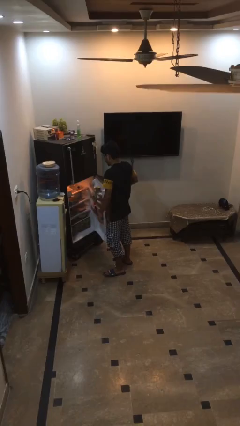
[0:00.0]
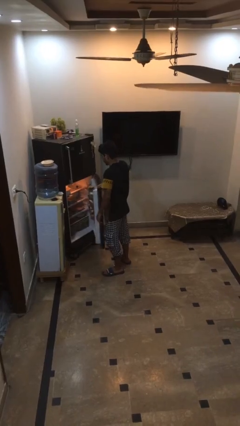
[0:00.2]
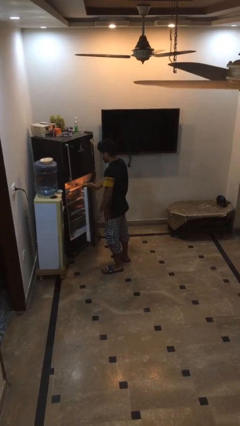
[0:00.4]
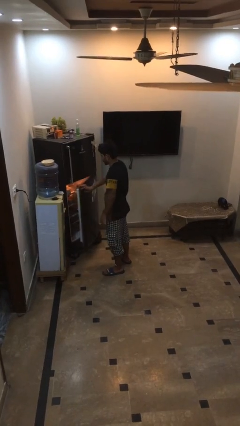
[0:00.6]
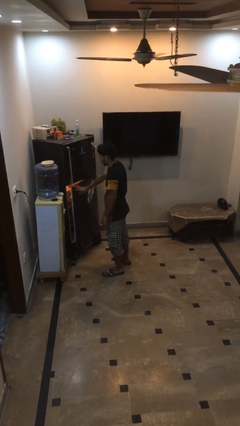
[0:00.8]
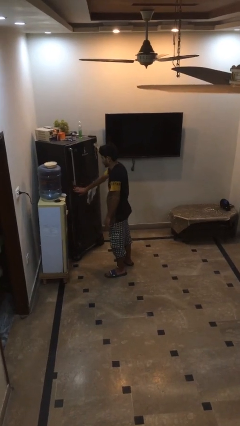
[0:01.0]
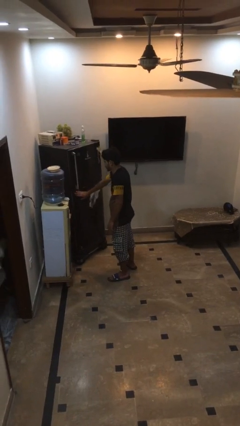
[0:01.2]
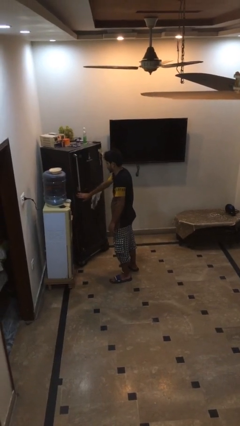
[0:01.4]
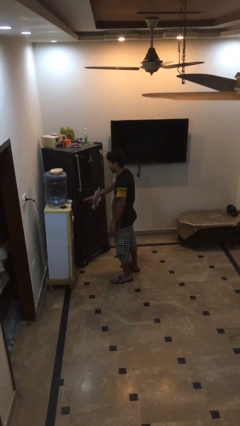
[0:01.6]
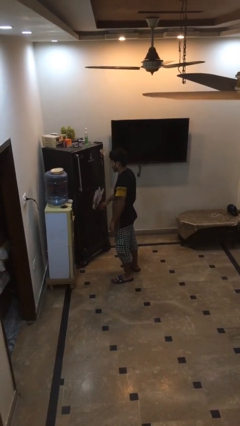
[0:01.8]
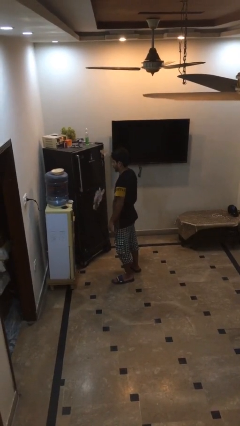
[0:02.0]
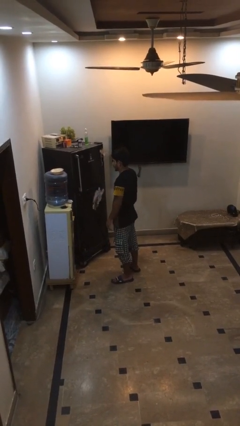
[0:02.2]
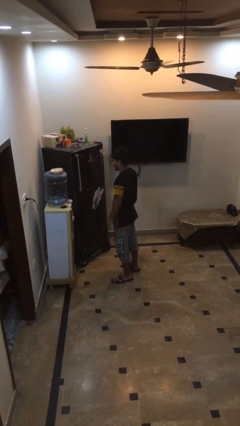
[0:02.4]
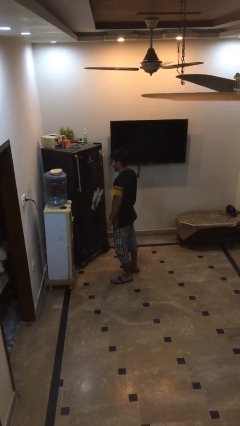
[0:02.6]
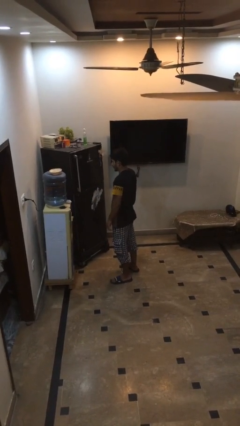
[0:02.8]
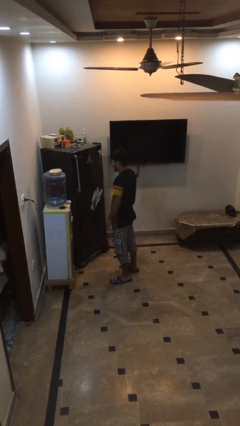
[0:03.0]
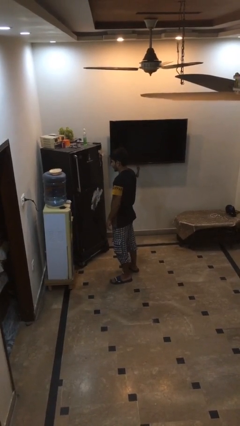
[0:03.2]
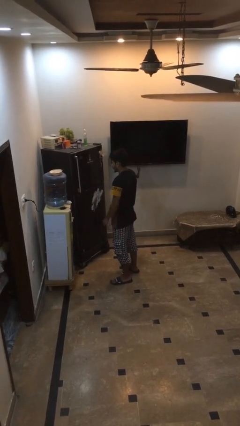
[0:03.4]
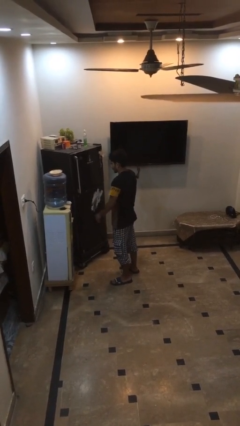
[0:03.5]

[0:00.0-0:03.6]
person closes refrigerator

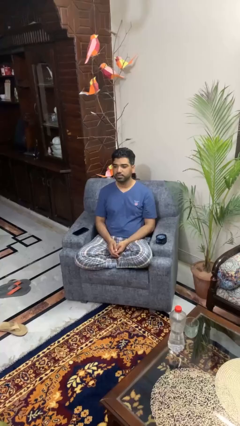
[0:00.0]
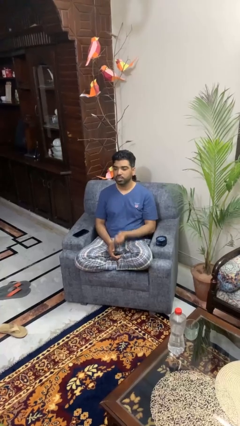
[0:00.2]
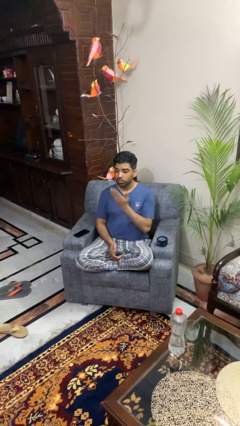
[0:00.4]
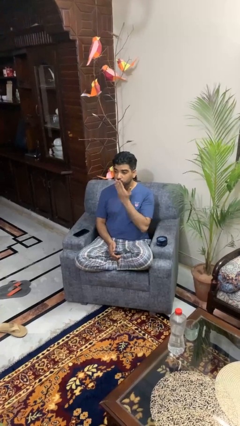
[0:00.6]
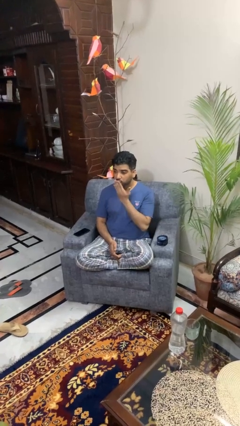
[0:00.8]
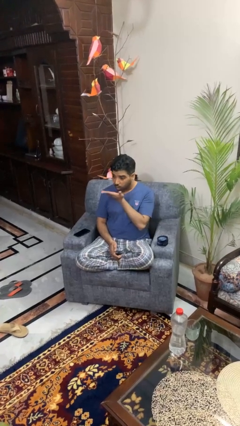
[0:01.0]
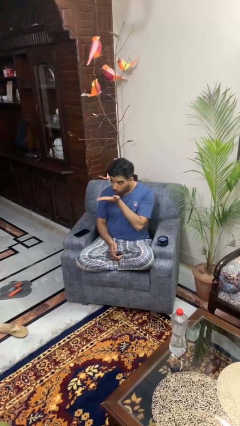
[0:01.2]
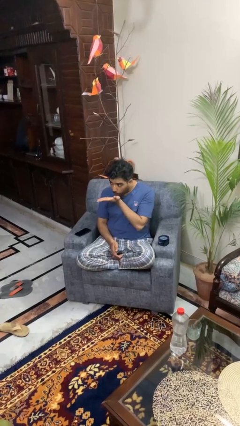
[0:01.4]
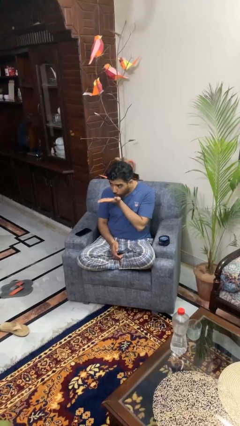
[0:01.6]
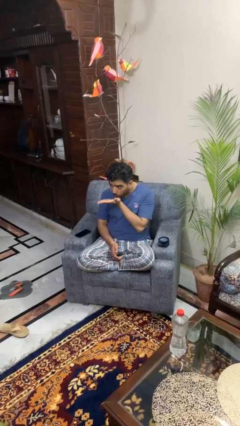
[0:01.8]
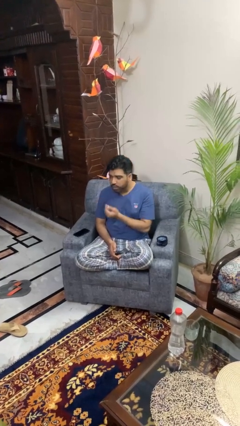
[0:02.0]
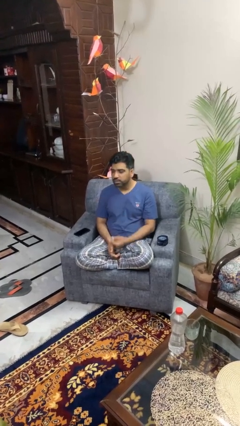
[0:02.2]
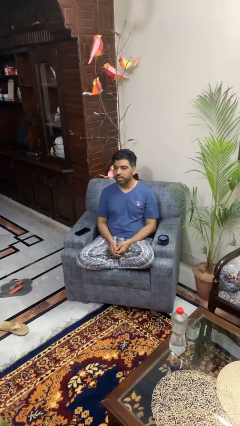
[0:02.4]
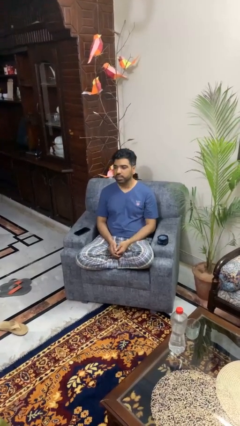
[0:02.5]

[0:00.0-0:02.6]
person gestures blow kiss

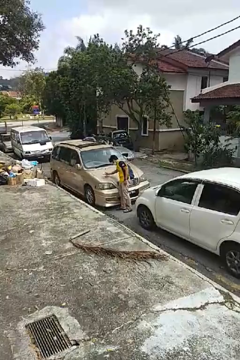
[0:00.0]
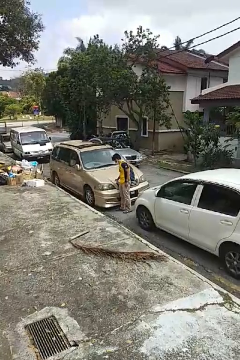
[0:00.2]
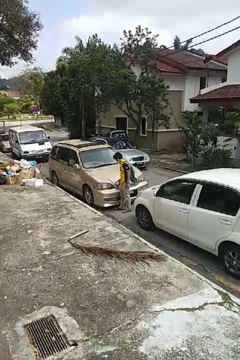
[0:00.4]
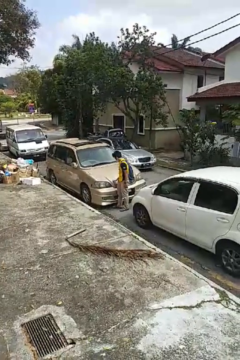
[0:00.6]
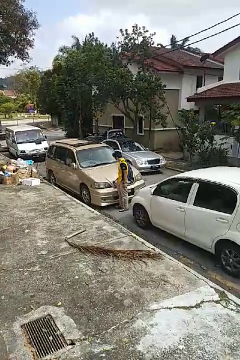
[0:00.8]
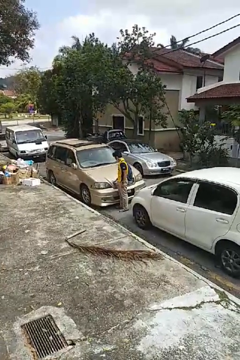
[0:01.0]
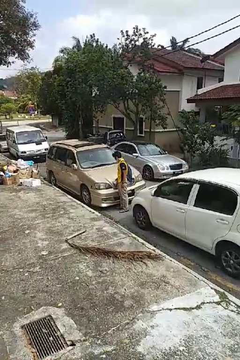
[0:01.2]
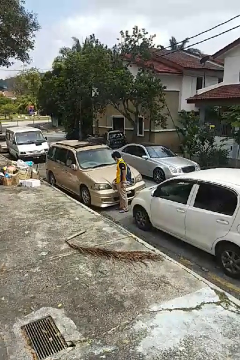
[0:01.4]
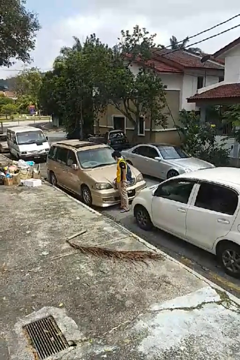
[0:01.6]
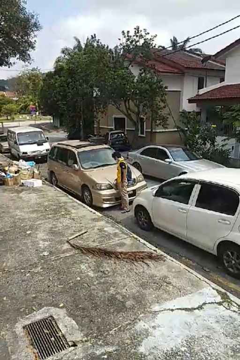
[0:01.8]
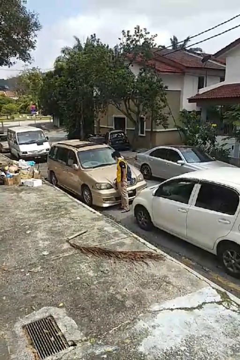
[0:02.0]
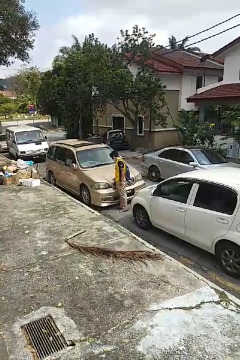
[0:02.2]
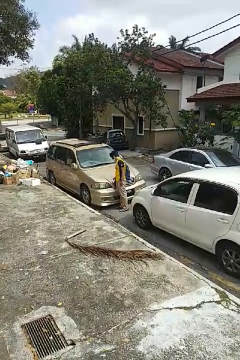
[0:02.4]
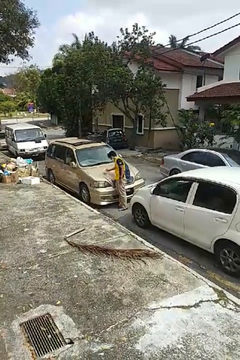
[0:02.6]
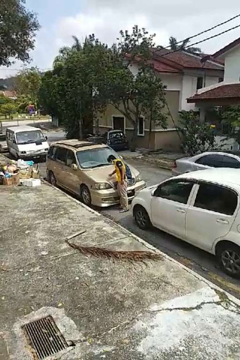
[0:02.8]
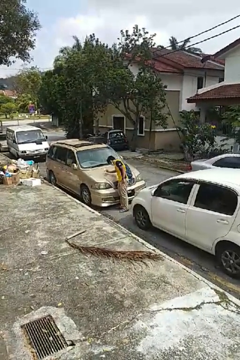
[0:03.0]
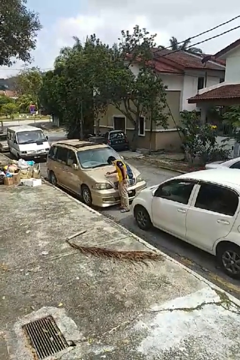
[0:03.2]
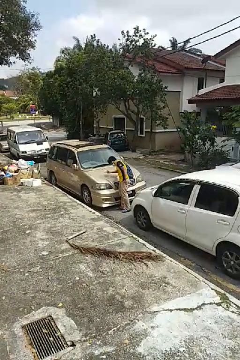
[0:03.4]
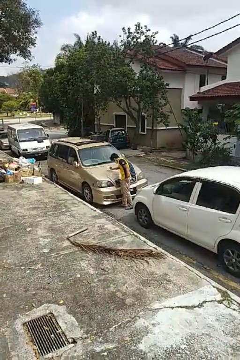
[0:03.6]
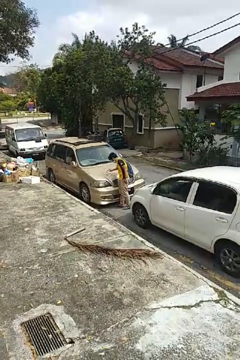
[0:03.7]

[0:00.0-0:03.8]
person polishes car with rag

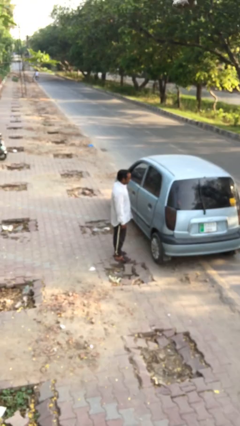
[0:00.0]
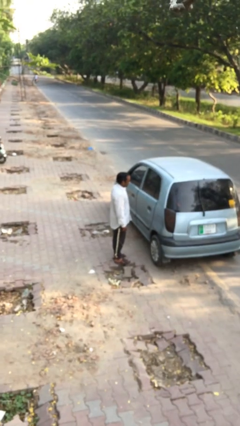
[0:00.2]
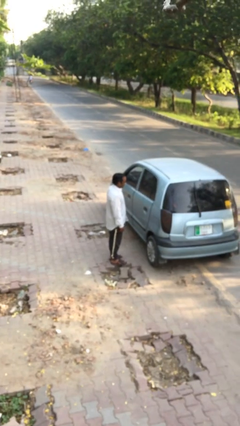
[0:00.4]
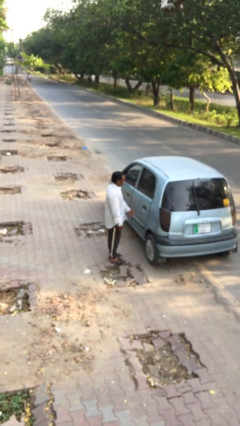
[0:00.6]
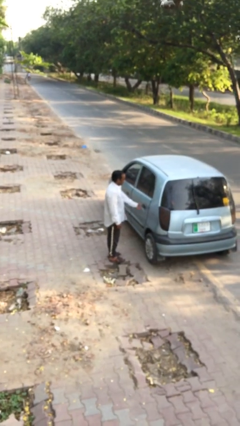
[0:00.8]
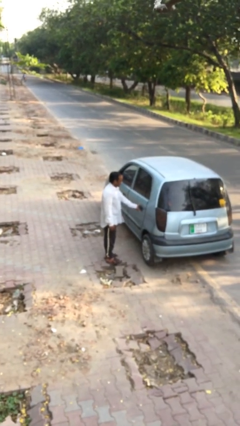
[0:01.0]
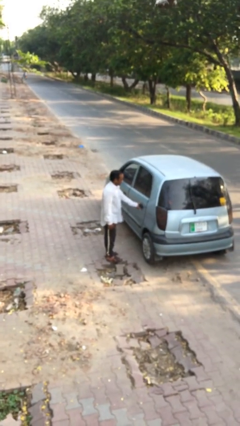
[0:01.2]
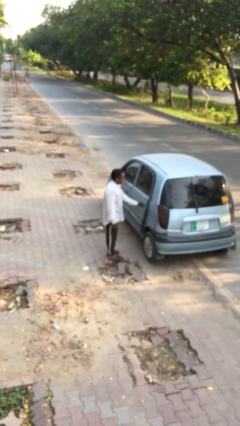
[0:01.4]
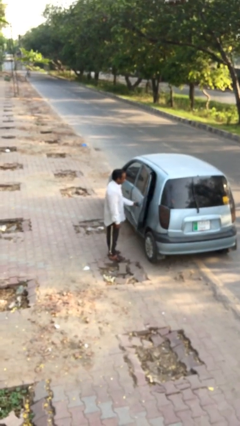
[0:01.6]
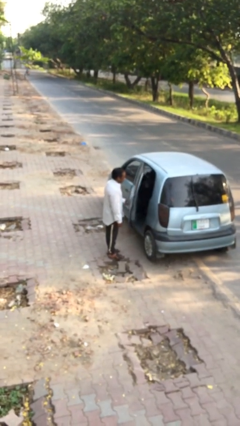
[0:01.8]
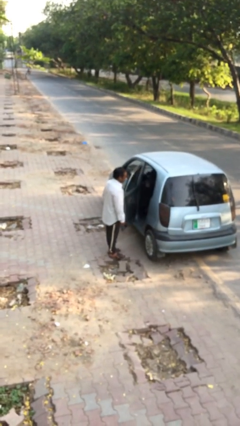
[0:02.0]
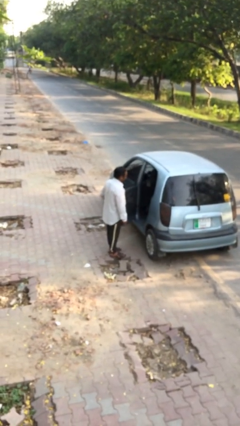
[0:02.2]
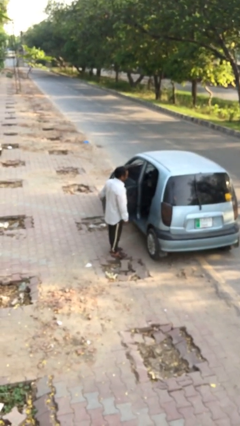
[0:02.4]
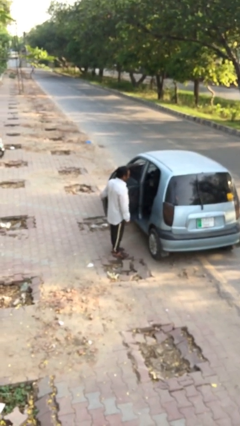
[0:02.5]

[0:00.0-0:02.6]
person opens car door

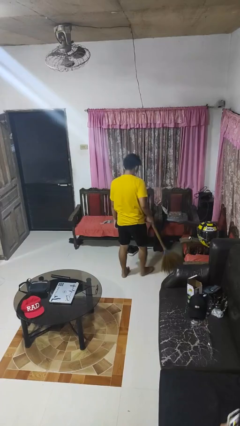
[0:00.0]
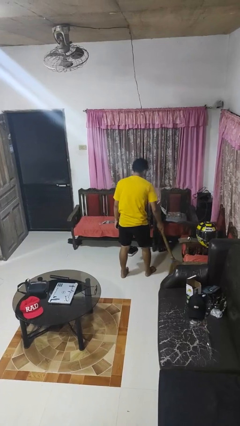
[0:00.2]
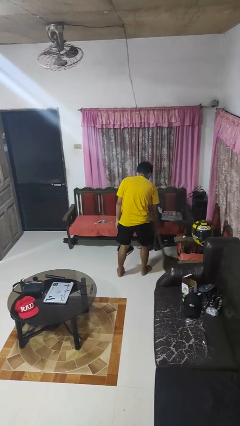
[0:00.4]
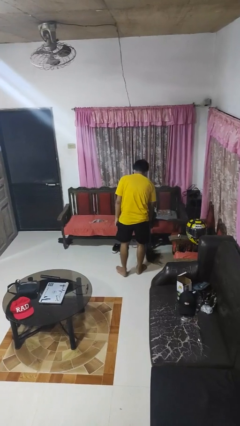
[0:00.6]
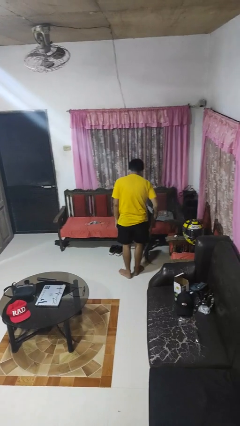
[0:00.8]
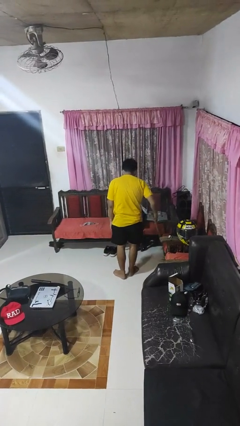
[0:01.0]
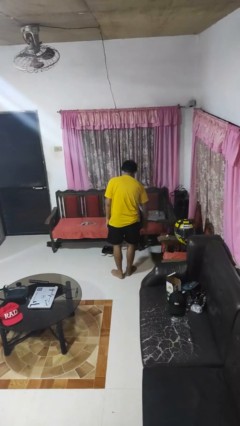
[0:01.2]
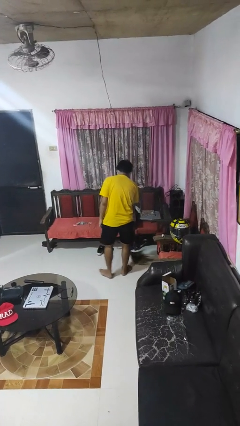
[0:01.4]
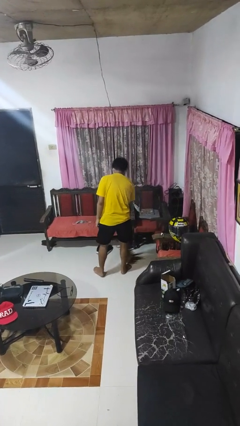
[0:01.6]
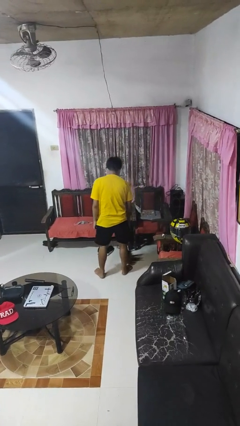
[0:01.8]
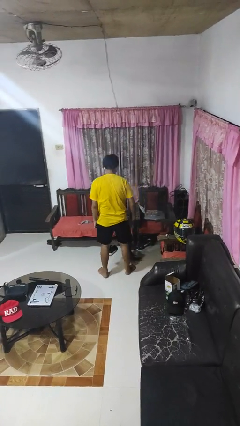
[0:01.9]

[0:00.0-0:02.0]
person sweeps floor

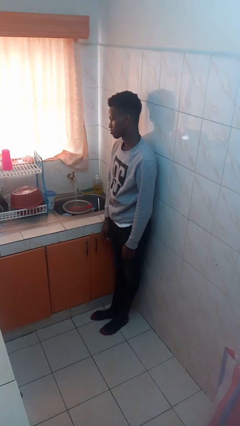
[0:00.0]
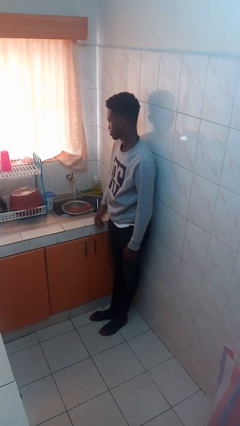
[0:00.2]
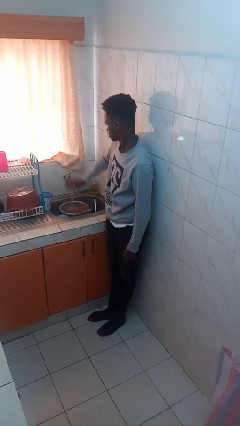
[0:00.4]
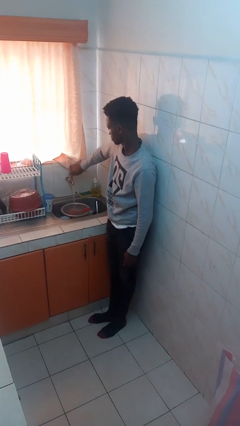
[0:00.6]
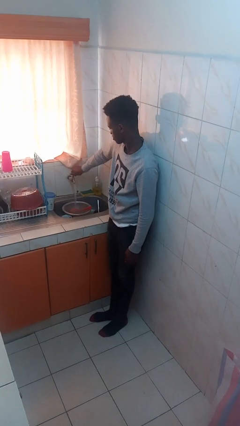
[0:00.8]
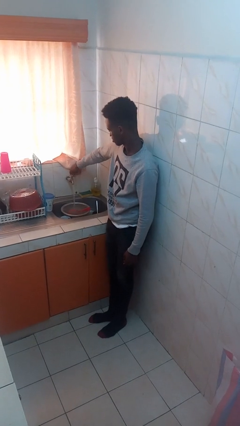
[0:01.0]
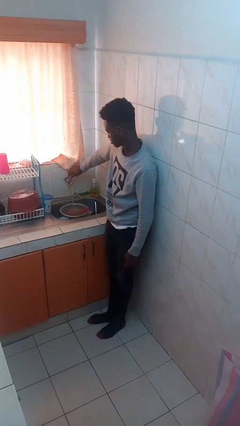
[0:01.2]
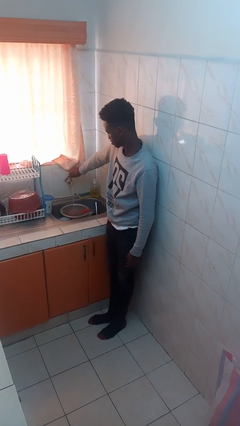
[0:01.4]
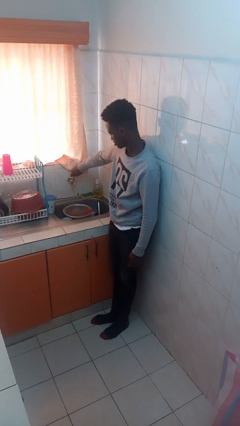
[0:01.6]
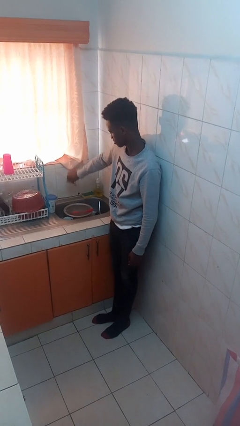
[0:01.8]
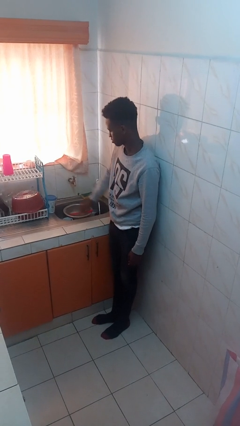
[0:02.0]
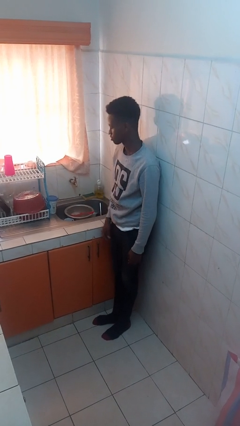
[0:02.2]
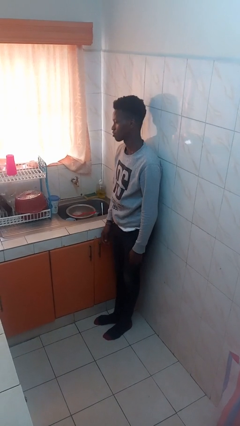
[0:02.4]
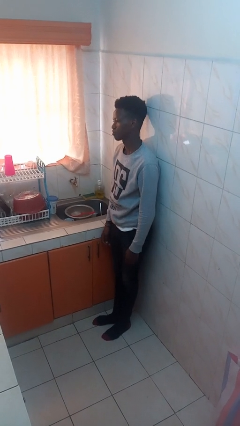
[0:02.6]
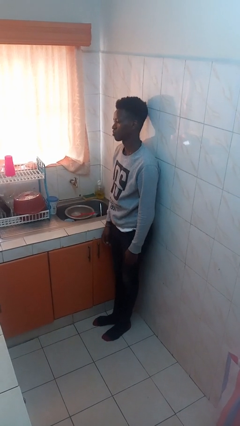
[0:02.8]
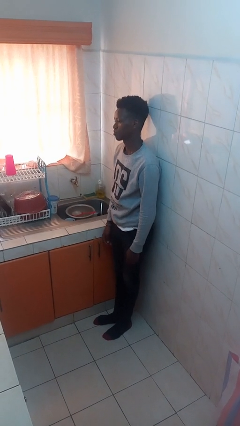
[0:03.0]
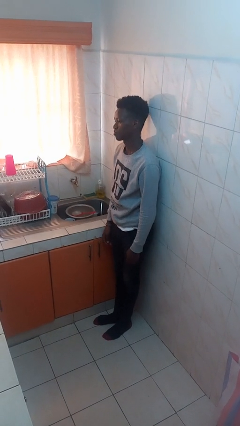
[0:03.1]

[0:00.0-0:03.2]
person turns off faucet
